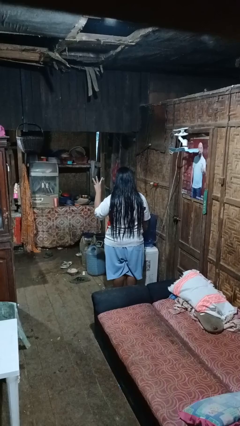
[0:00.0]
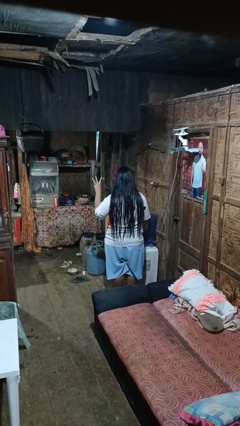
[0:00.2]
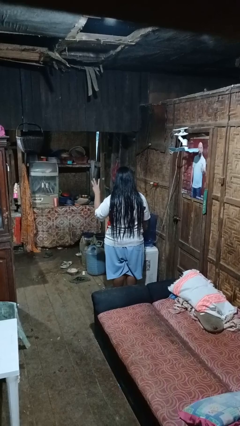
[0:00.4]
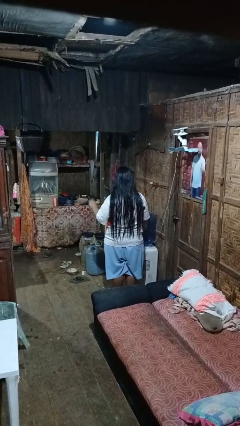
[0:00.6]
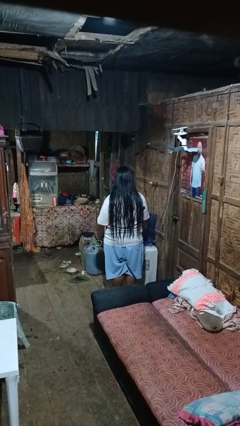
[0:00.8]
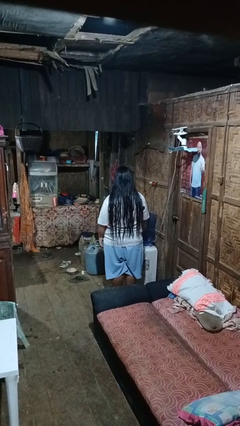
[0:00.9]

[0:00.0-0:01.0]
person gestures number three

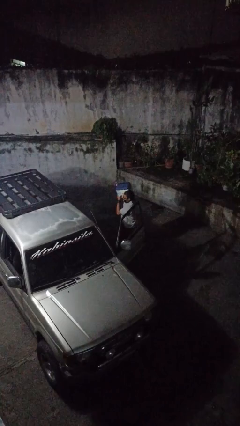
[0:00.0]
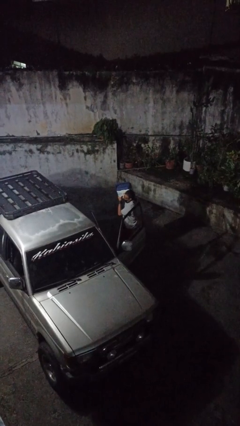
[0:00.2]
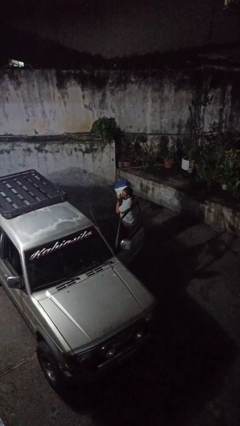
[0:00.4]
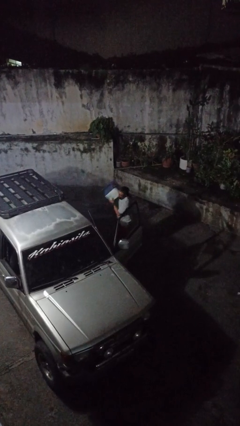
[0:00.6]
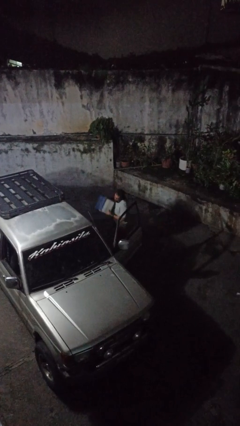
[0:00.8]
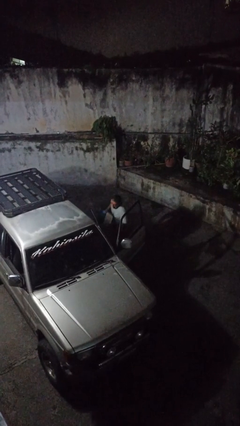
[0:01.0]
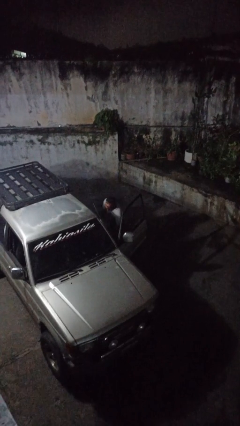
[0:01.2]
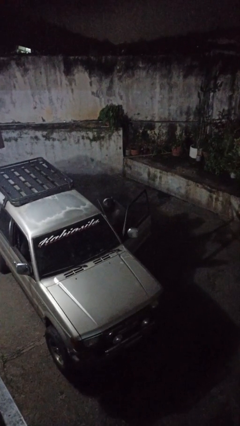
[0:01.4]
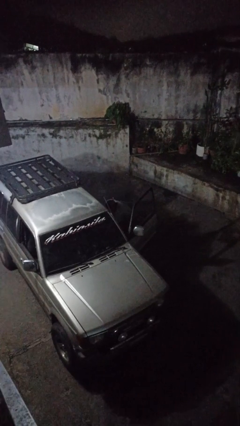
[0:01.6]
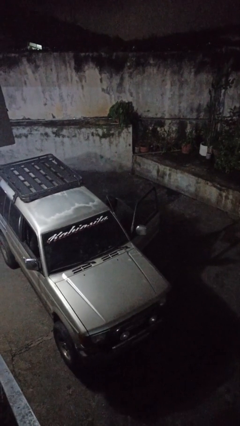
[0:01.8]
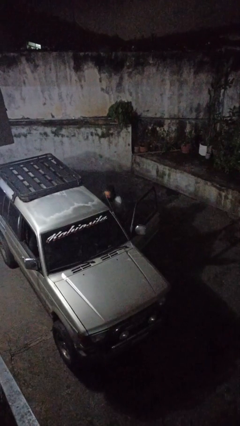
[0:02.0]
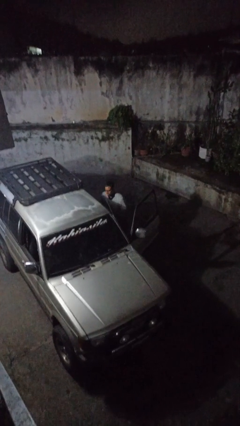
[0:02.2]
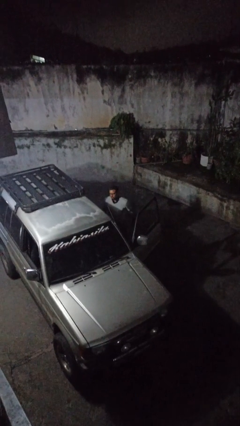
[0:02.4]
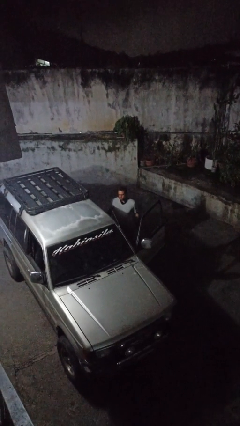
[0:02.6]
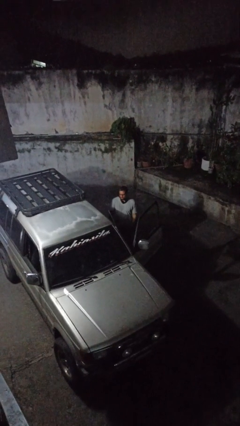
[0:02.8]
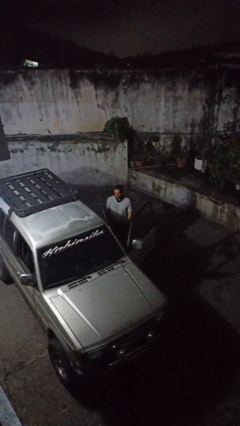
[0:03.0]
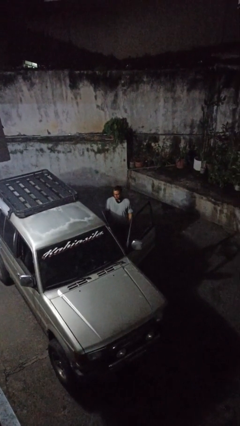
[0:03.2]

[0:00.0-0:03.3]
person loads car

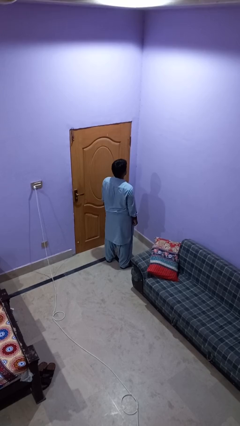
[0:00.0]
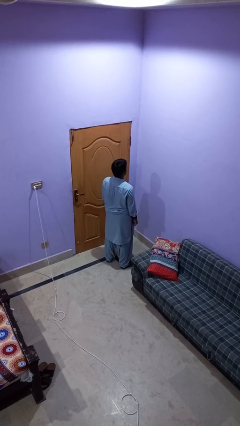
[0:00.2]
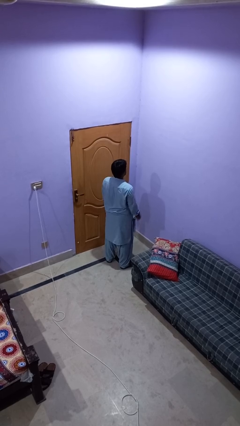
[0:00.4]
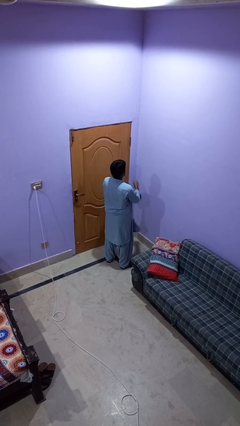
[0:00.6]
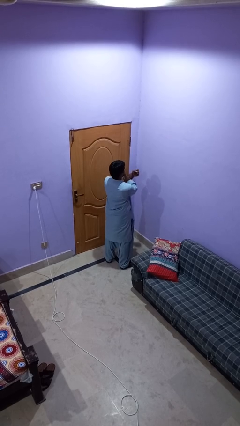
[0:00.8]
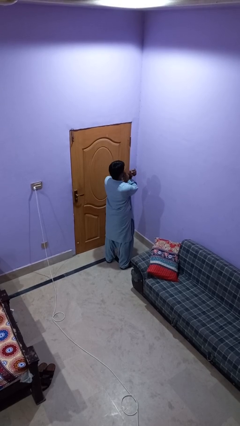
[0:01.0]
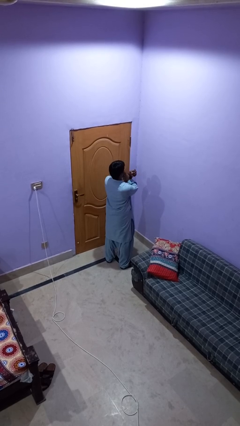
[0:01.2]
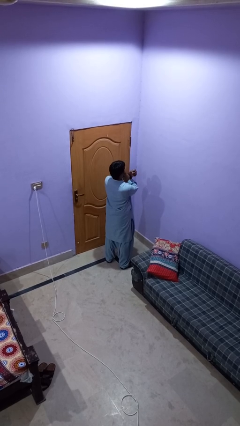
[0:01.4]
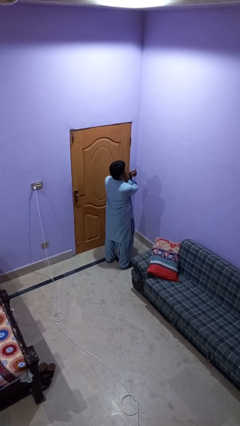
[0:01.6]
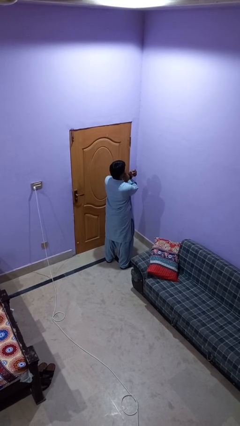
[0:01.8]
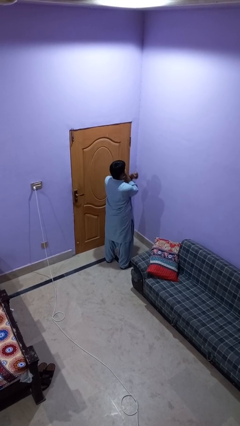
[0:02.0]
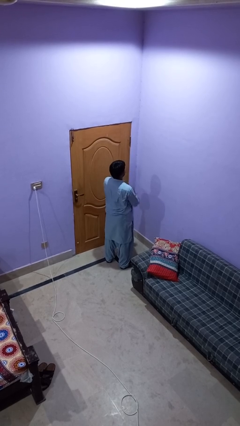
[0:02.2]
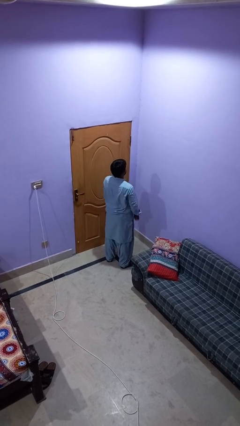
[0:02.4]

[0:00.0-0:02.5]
person gestures arms x

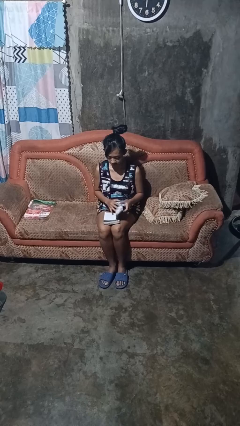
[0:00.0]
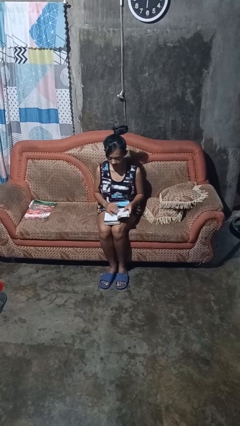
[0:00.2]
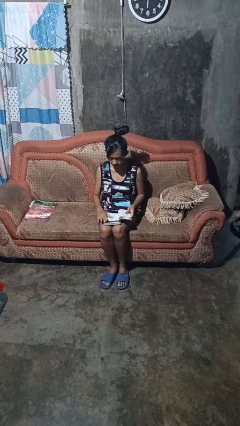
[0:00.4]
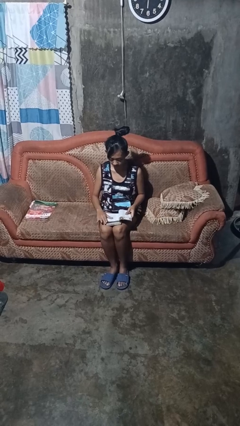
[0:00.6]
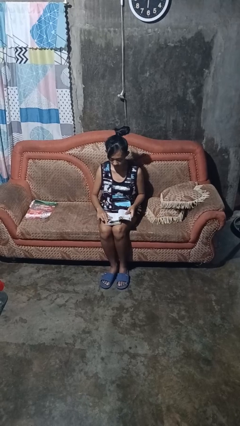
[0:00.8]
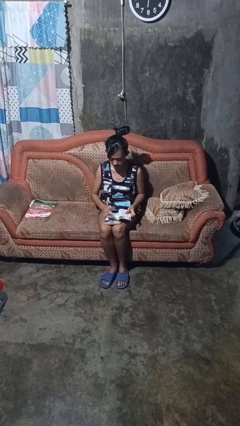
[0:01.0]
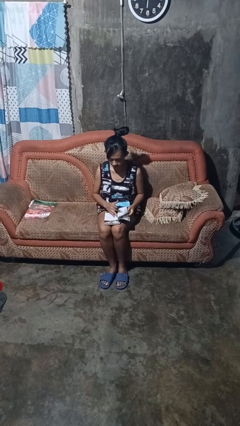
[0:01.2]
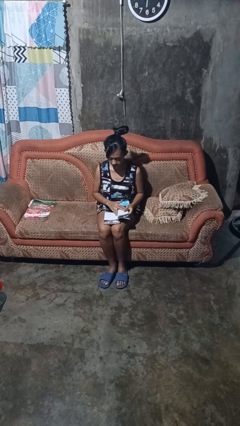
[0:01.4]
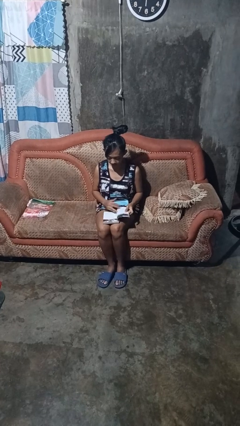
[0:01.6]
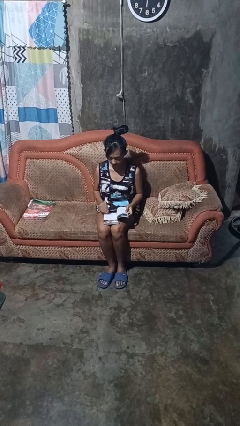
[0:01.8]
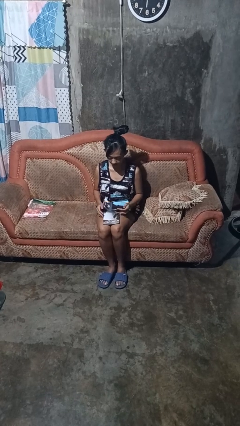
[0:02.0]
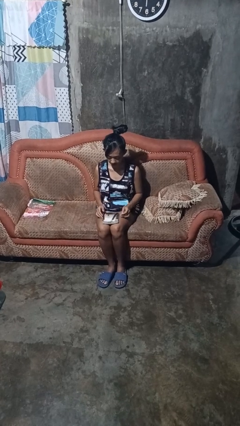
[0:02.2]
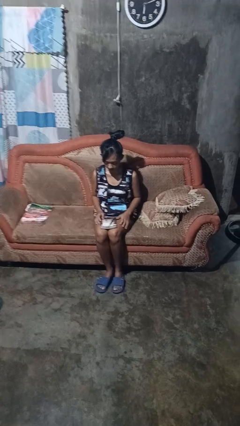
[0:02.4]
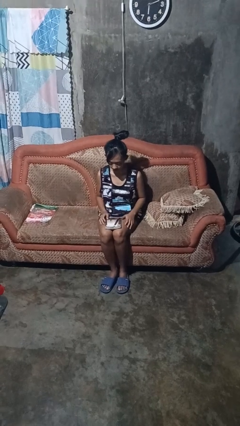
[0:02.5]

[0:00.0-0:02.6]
person reads book

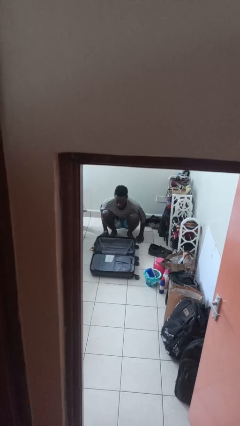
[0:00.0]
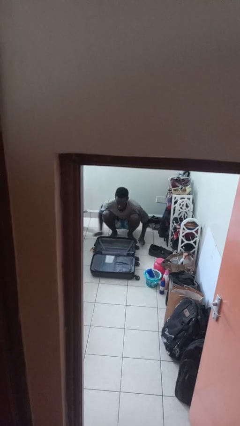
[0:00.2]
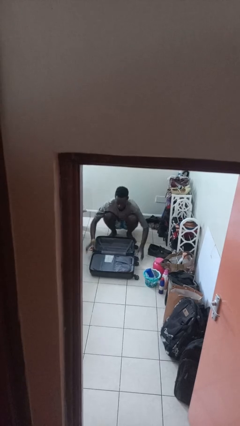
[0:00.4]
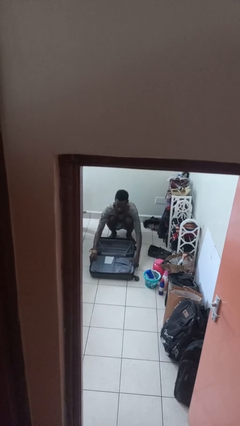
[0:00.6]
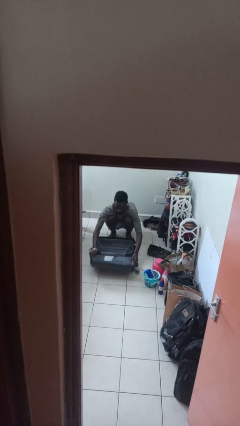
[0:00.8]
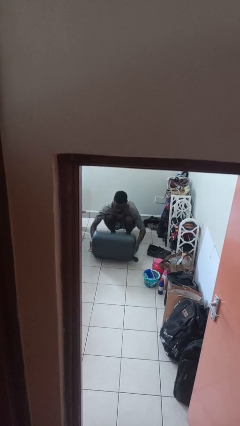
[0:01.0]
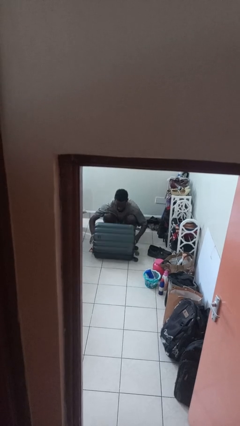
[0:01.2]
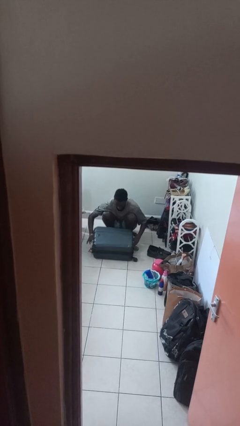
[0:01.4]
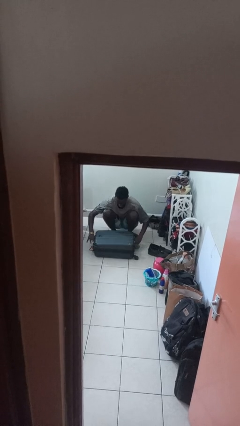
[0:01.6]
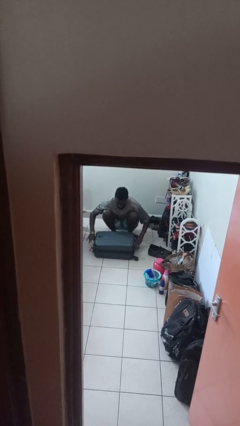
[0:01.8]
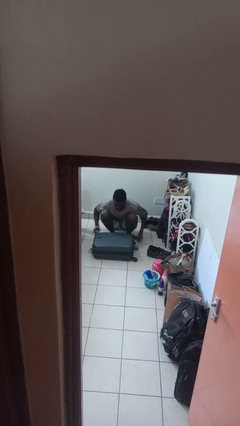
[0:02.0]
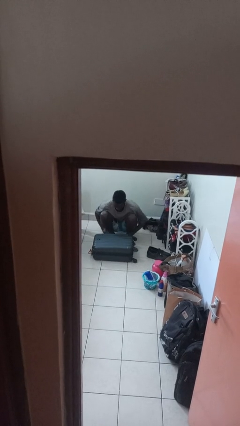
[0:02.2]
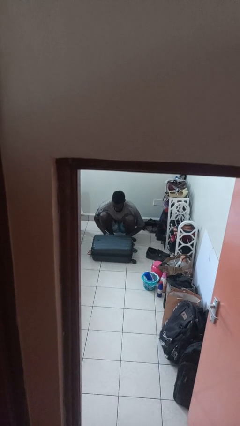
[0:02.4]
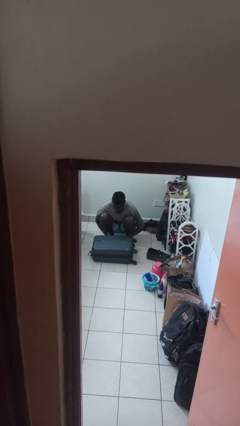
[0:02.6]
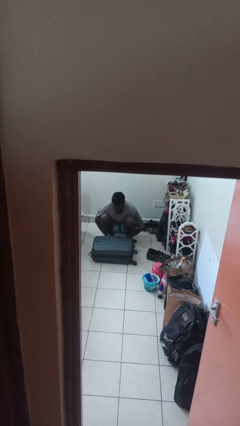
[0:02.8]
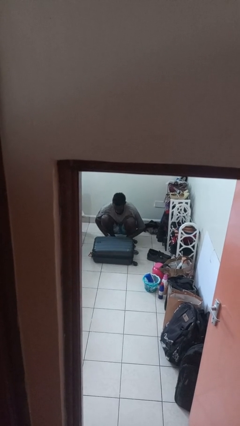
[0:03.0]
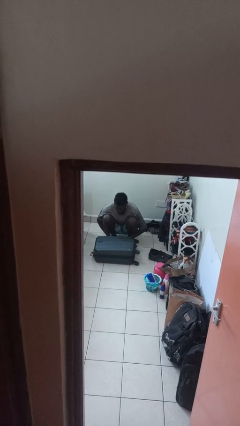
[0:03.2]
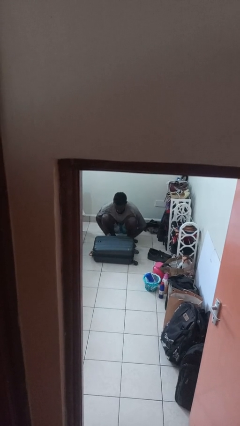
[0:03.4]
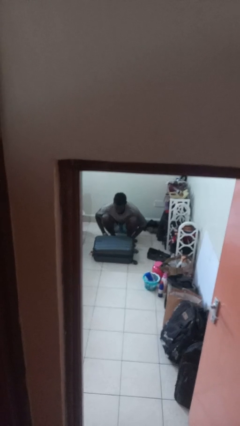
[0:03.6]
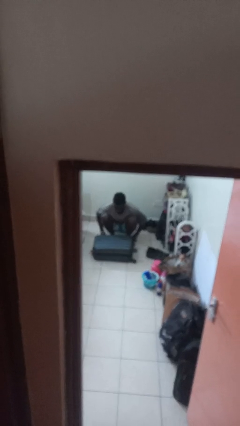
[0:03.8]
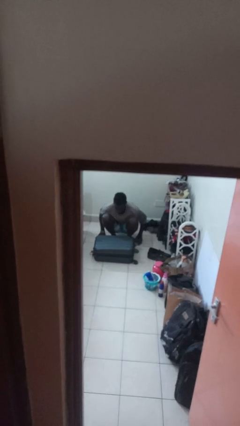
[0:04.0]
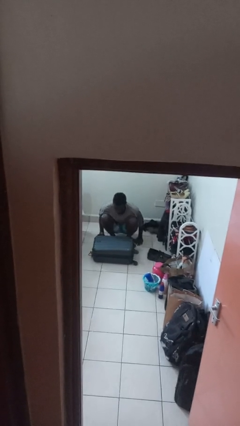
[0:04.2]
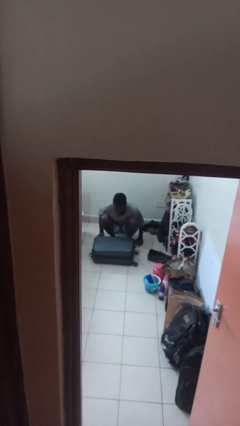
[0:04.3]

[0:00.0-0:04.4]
person closes suitcase

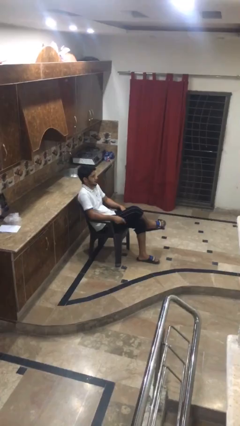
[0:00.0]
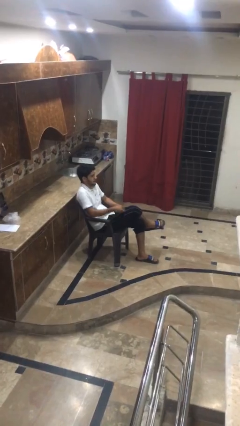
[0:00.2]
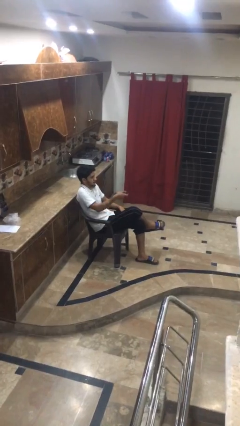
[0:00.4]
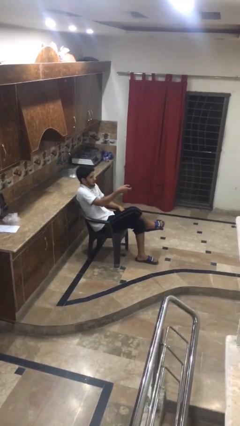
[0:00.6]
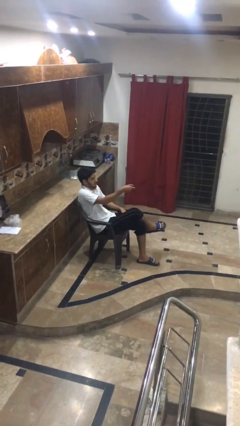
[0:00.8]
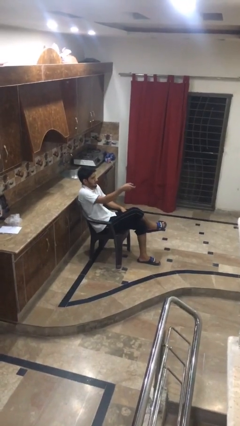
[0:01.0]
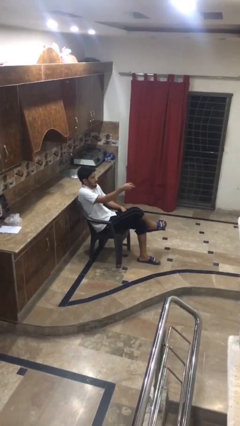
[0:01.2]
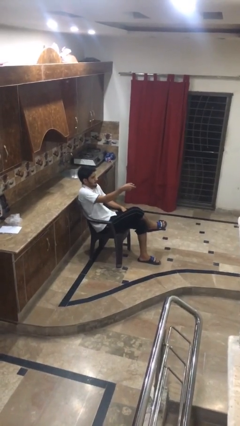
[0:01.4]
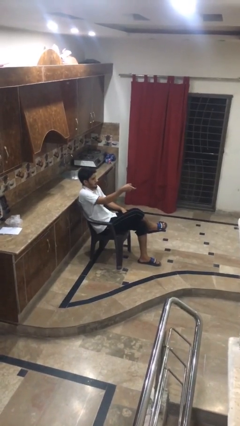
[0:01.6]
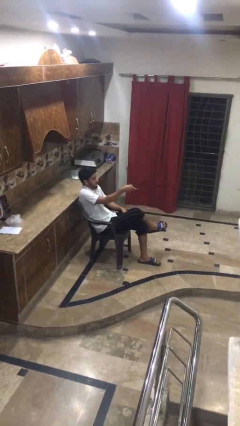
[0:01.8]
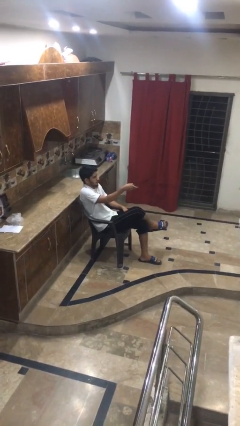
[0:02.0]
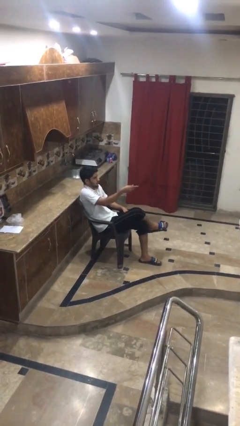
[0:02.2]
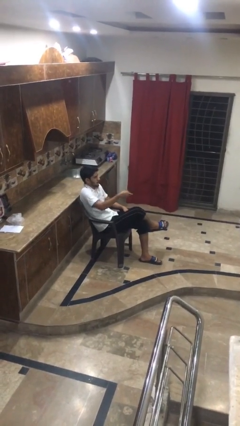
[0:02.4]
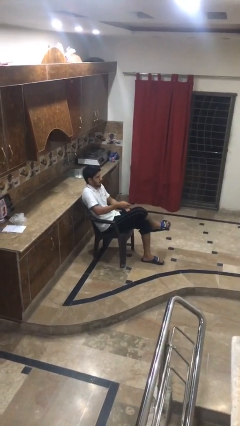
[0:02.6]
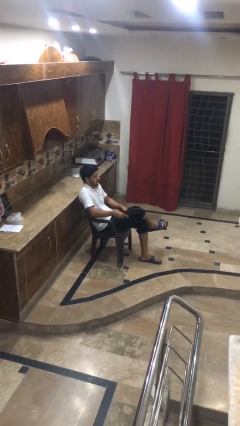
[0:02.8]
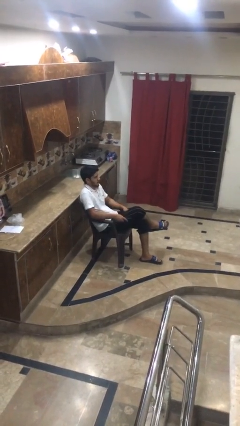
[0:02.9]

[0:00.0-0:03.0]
person uses television remote

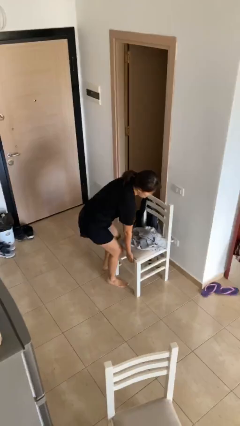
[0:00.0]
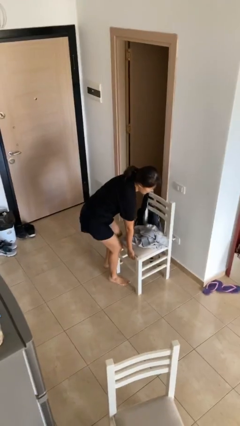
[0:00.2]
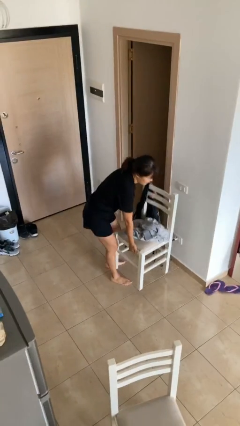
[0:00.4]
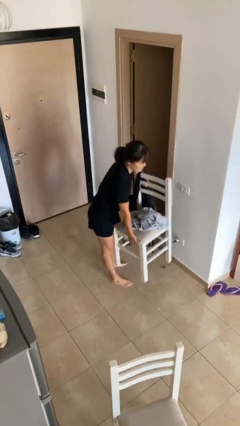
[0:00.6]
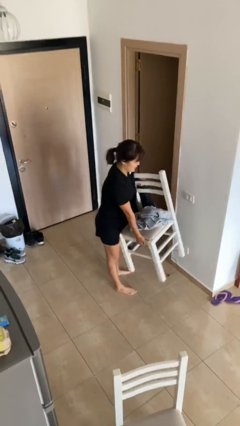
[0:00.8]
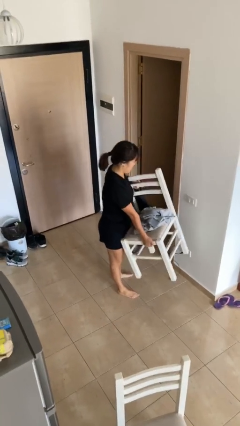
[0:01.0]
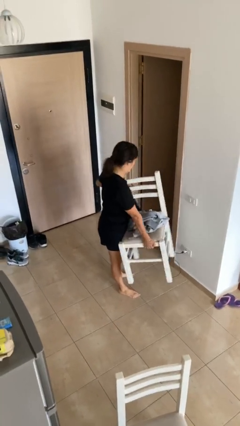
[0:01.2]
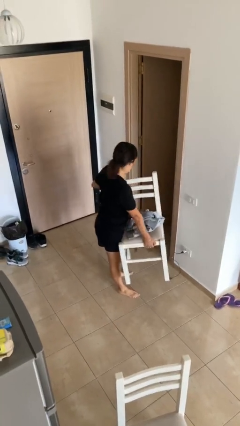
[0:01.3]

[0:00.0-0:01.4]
person picks up object from floor
